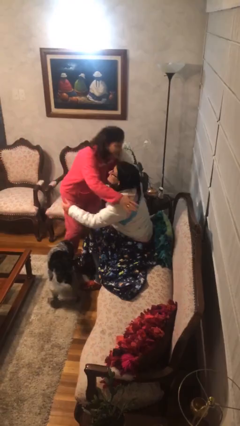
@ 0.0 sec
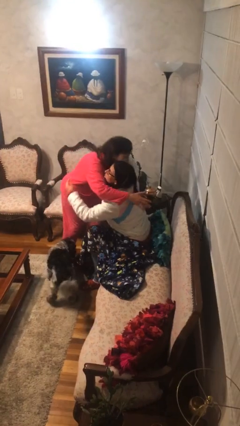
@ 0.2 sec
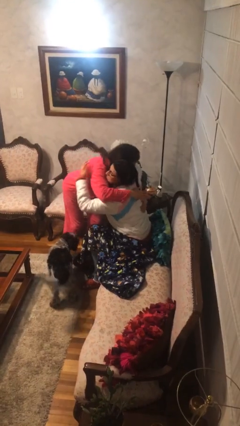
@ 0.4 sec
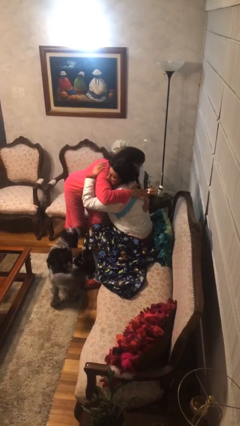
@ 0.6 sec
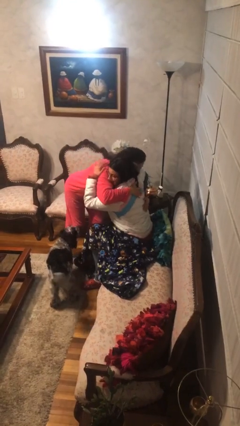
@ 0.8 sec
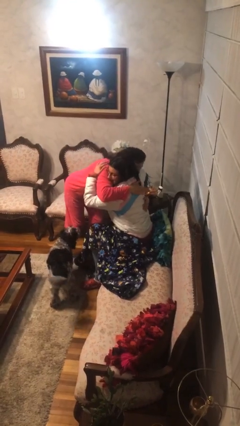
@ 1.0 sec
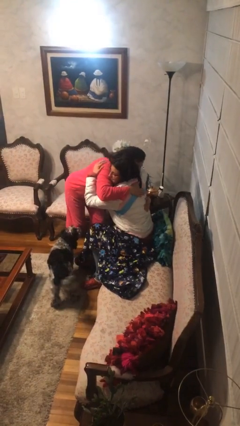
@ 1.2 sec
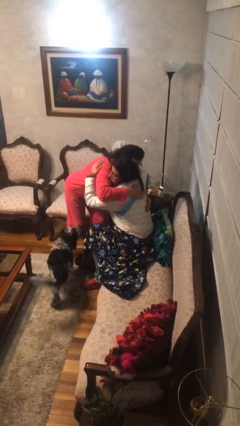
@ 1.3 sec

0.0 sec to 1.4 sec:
person embraces person

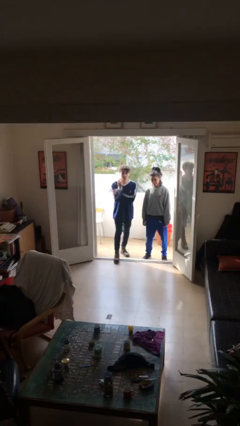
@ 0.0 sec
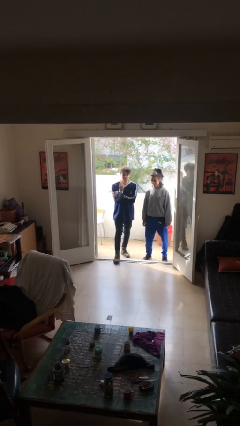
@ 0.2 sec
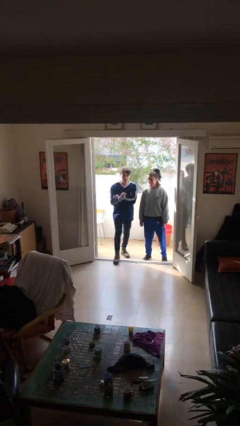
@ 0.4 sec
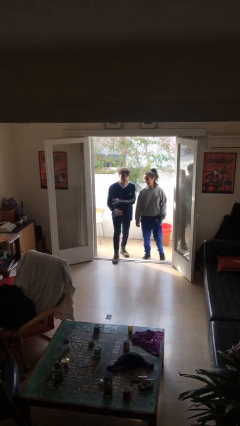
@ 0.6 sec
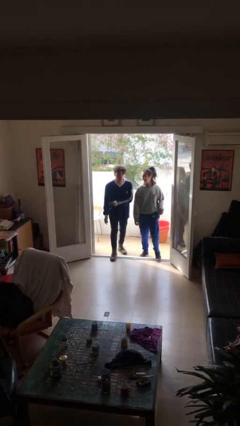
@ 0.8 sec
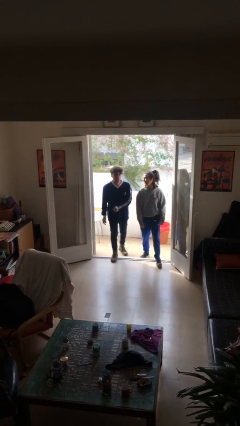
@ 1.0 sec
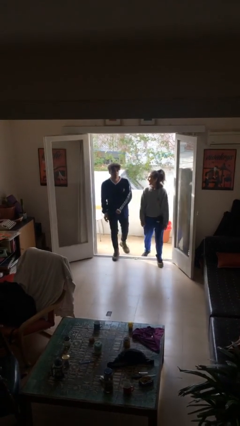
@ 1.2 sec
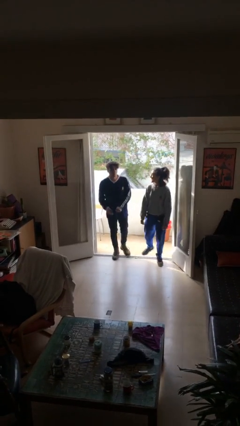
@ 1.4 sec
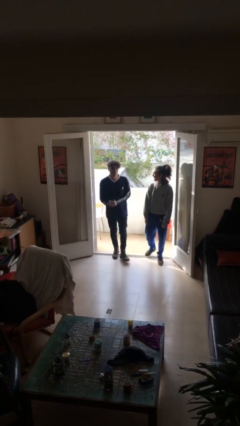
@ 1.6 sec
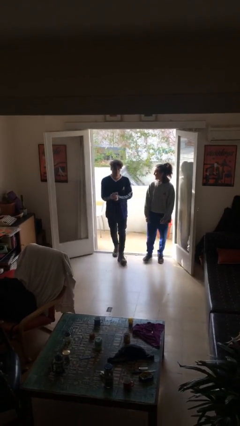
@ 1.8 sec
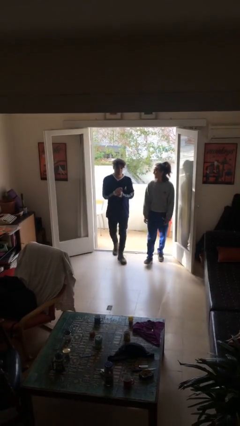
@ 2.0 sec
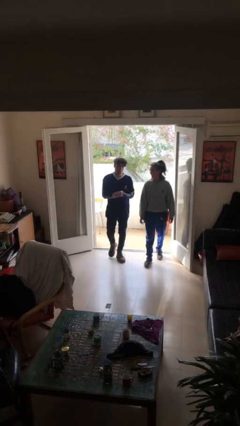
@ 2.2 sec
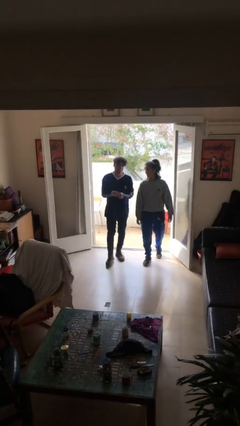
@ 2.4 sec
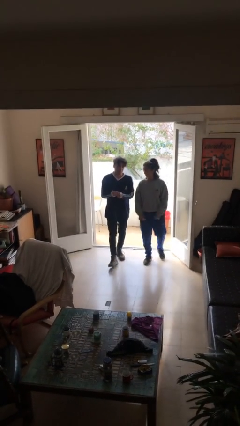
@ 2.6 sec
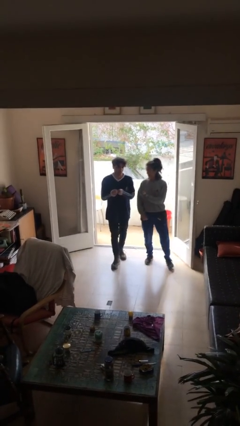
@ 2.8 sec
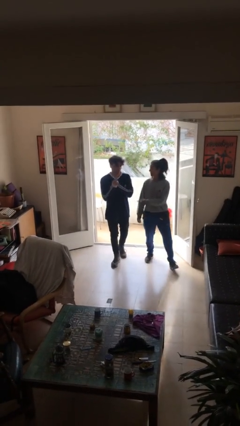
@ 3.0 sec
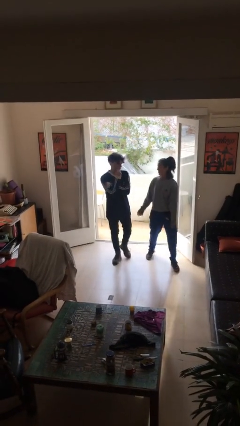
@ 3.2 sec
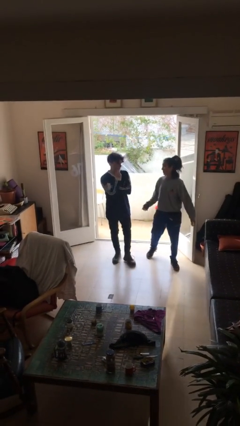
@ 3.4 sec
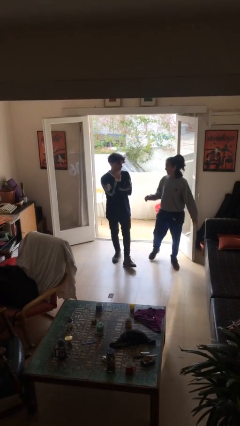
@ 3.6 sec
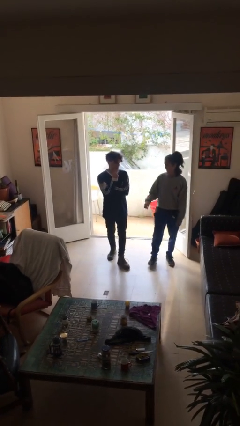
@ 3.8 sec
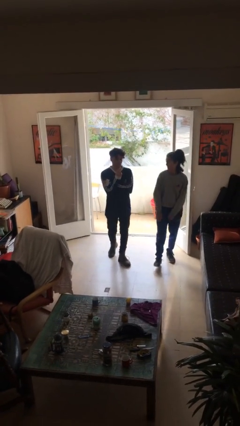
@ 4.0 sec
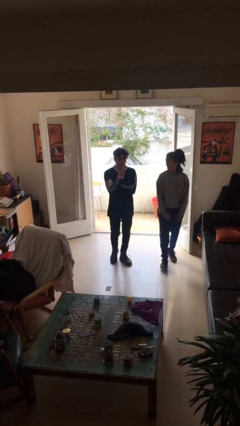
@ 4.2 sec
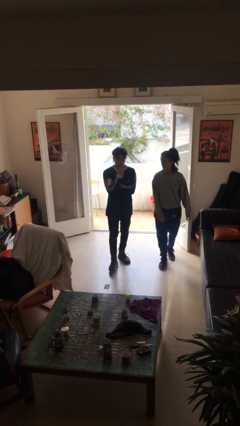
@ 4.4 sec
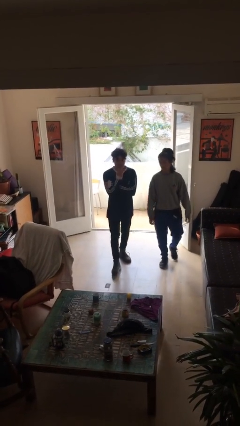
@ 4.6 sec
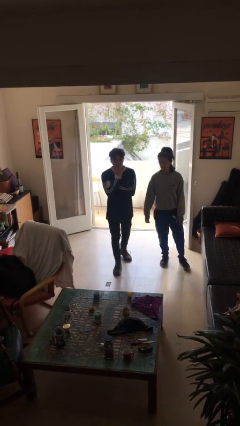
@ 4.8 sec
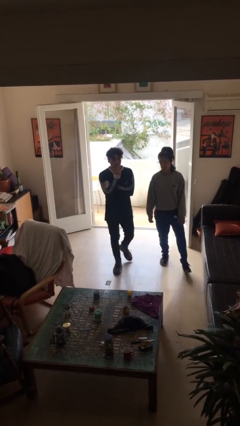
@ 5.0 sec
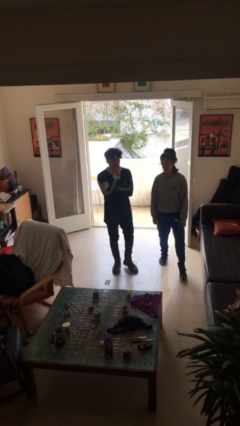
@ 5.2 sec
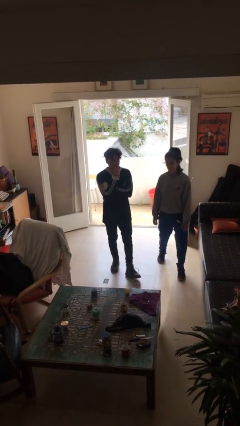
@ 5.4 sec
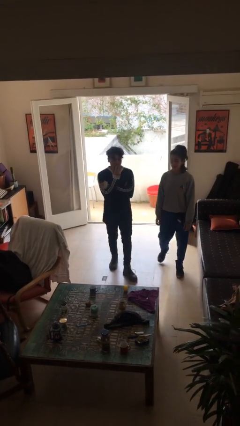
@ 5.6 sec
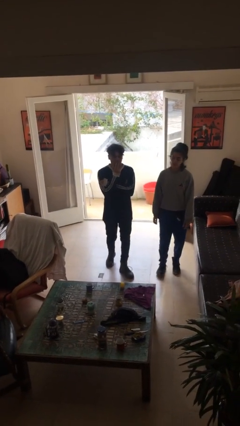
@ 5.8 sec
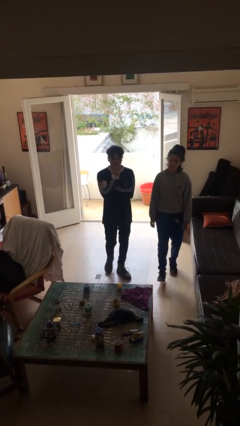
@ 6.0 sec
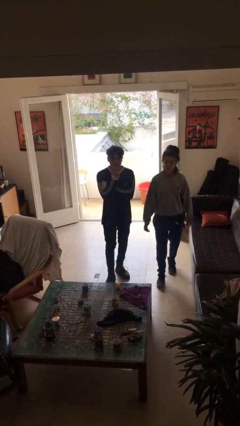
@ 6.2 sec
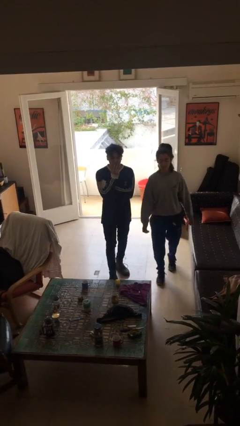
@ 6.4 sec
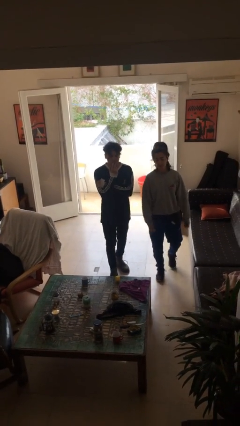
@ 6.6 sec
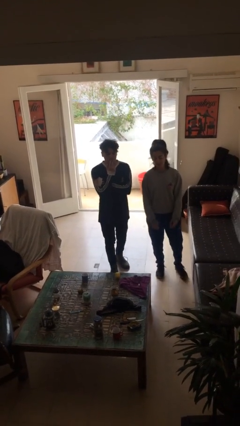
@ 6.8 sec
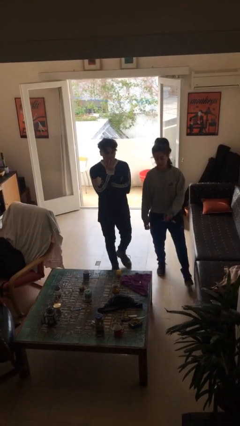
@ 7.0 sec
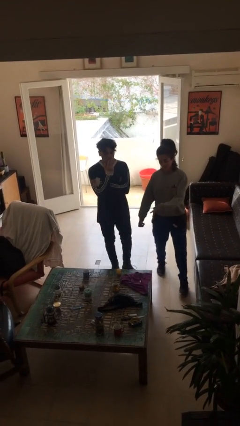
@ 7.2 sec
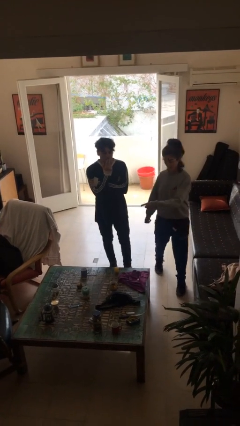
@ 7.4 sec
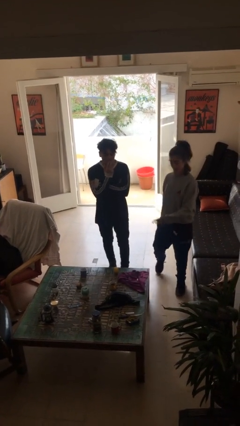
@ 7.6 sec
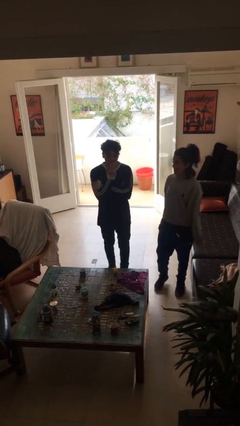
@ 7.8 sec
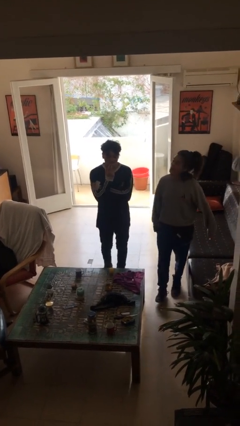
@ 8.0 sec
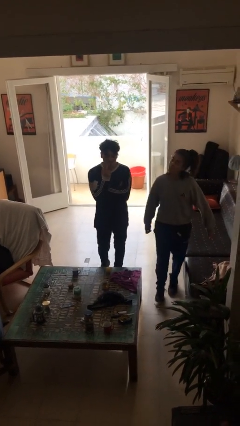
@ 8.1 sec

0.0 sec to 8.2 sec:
person talks to person

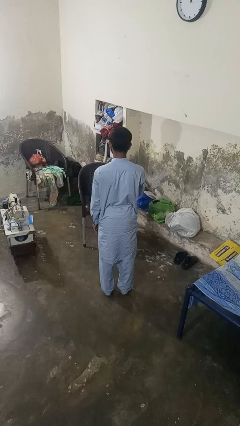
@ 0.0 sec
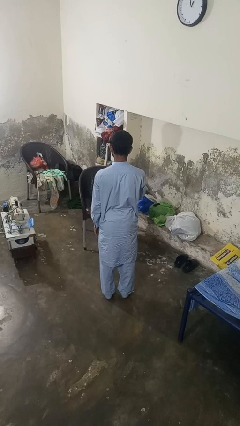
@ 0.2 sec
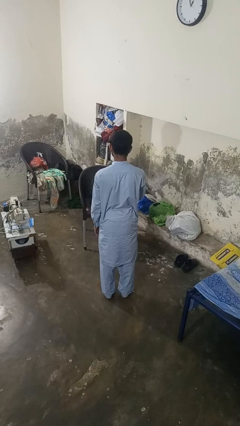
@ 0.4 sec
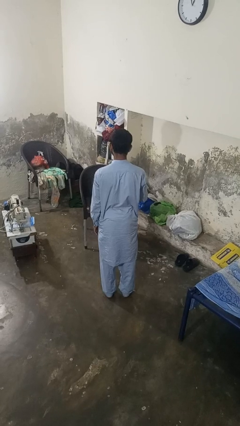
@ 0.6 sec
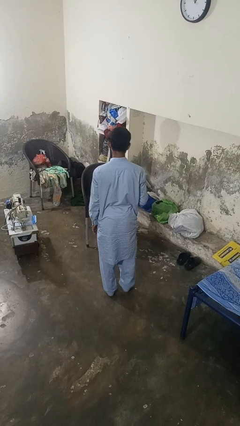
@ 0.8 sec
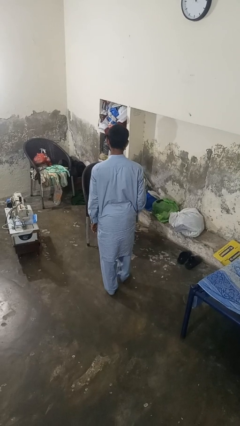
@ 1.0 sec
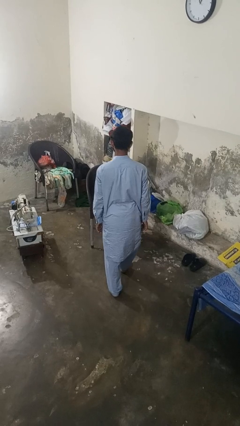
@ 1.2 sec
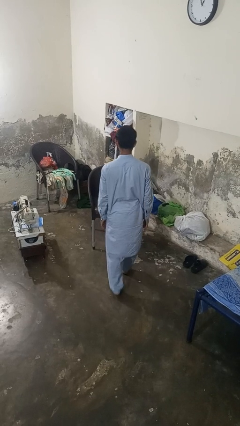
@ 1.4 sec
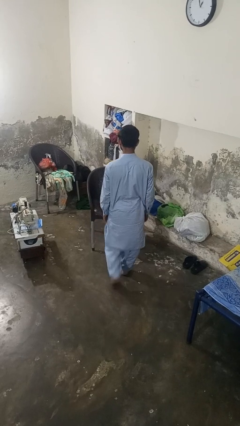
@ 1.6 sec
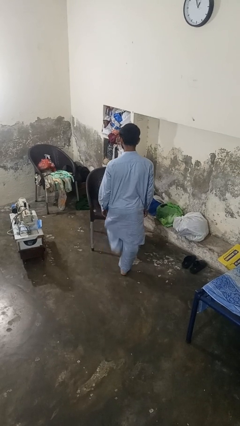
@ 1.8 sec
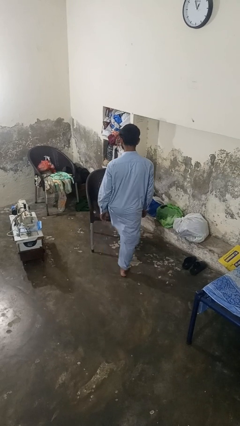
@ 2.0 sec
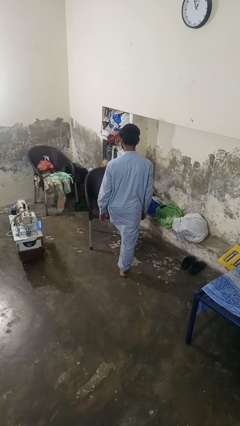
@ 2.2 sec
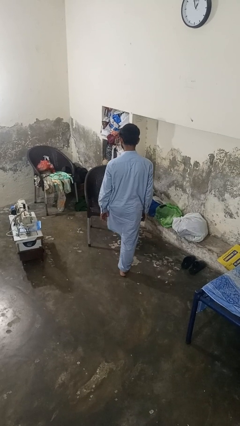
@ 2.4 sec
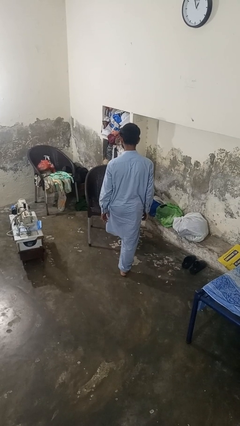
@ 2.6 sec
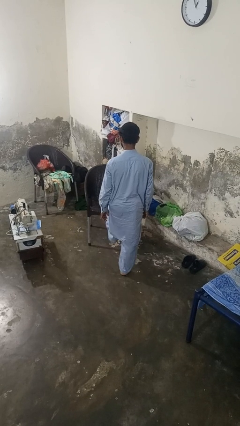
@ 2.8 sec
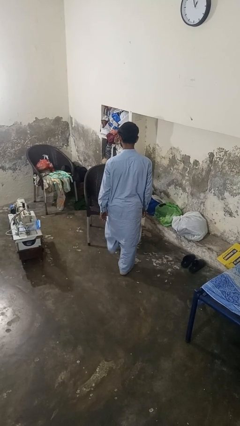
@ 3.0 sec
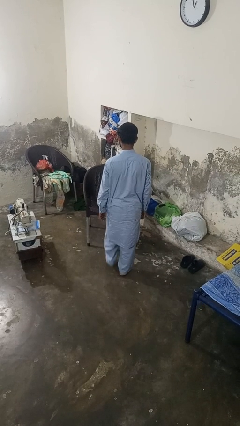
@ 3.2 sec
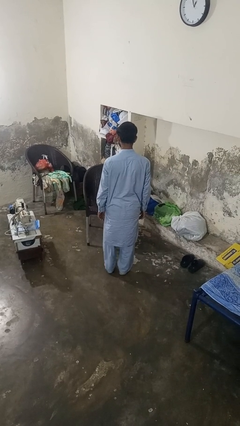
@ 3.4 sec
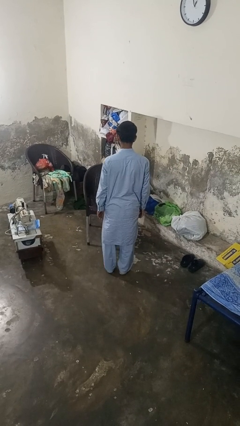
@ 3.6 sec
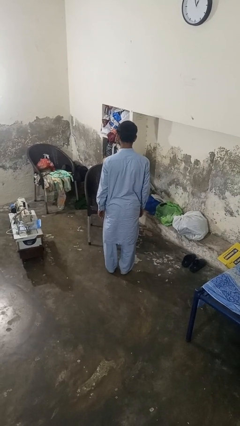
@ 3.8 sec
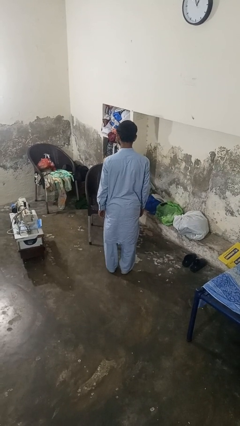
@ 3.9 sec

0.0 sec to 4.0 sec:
person stubs toe

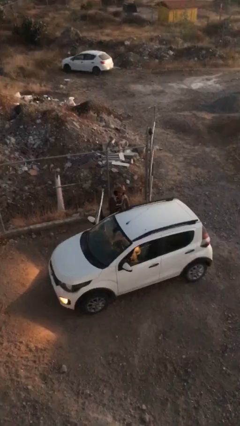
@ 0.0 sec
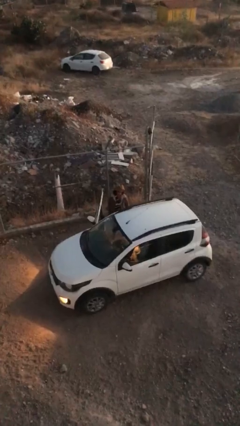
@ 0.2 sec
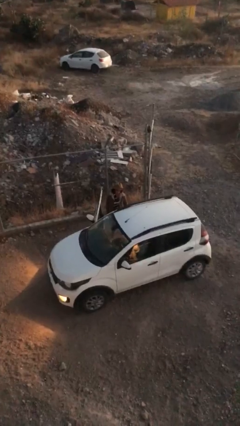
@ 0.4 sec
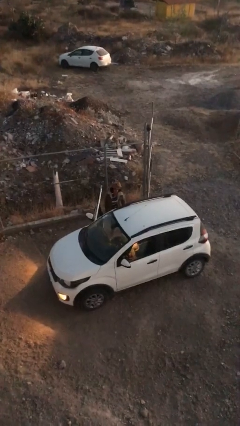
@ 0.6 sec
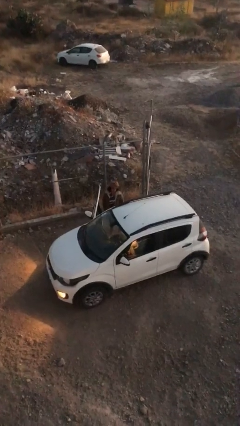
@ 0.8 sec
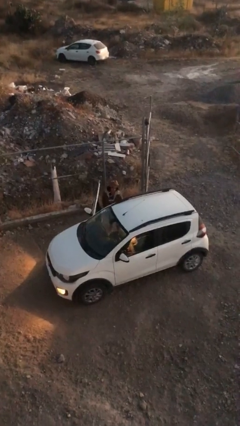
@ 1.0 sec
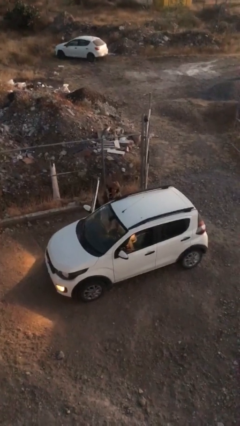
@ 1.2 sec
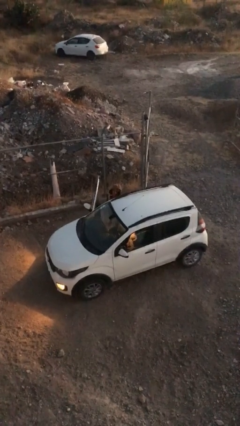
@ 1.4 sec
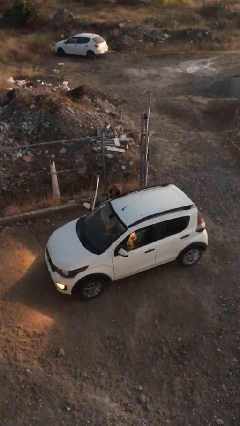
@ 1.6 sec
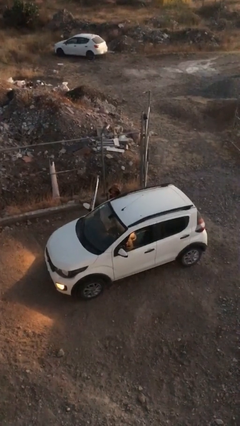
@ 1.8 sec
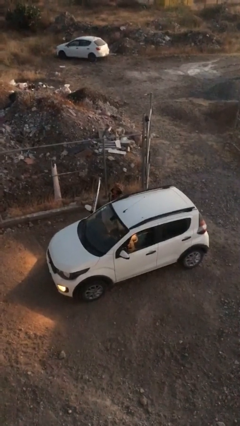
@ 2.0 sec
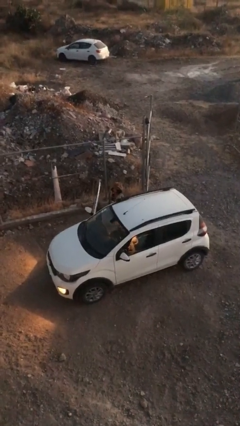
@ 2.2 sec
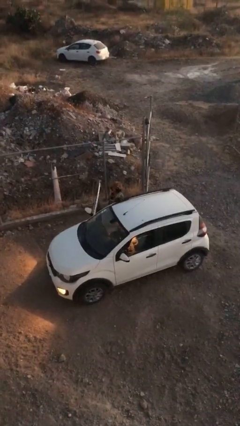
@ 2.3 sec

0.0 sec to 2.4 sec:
person unloads car

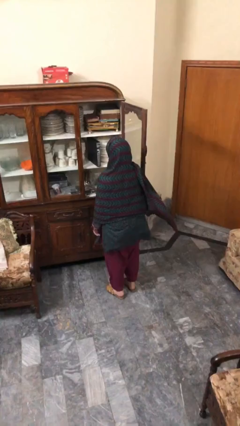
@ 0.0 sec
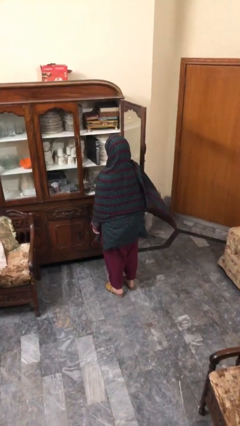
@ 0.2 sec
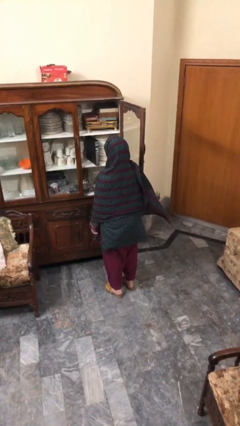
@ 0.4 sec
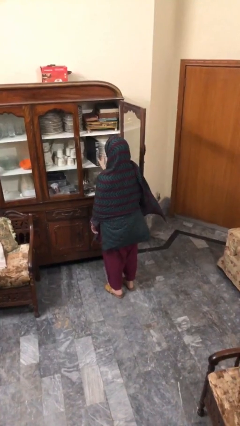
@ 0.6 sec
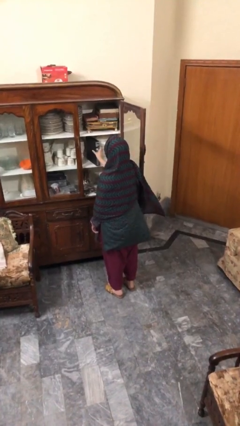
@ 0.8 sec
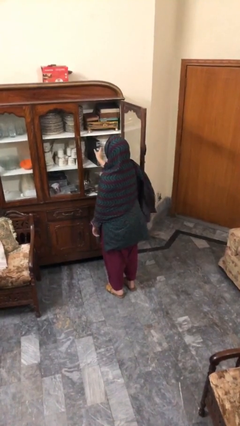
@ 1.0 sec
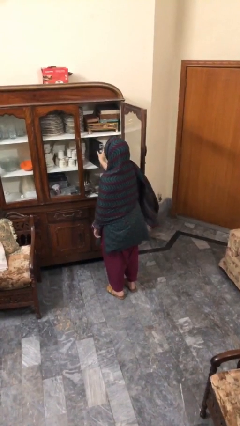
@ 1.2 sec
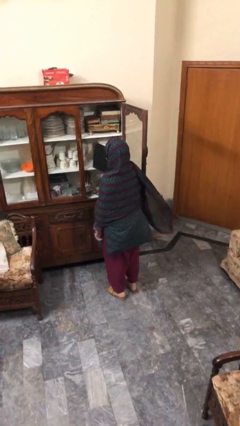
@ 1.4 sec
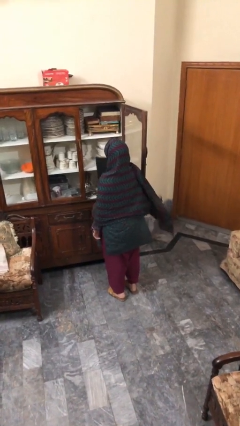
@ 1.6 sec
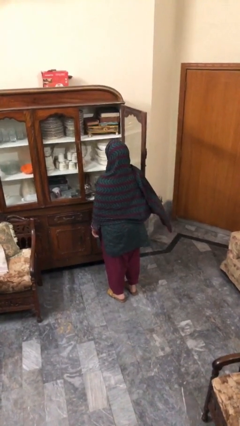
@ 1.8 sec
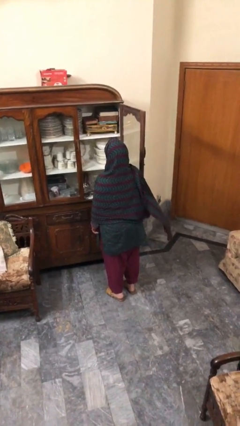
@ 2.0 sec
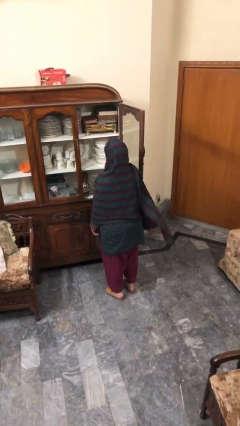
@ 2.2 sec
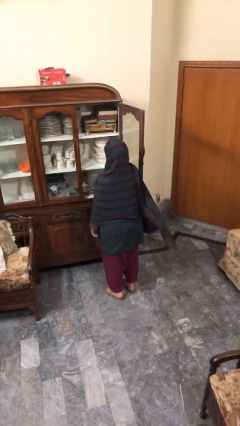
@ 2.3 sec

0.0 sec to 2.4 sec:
person picks up object from cabinet
